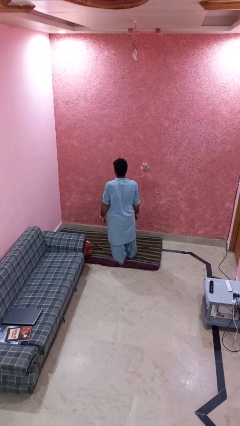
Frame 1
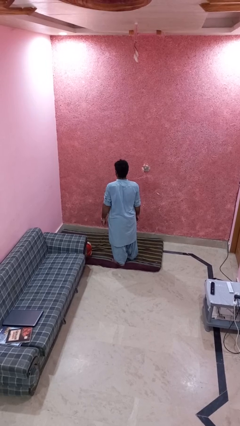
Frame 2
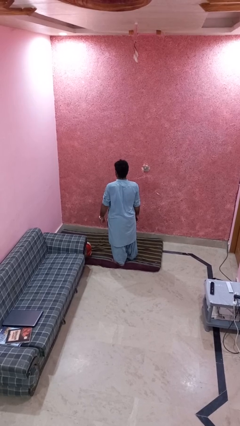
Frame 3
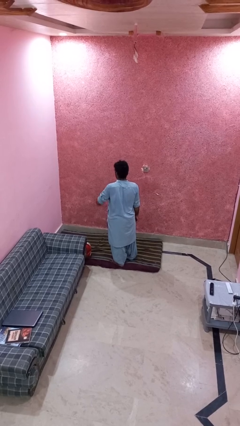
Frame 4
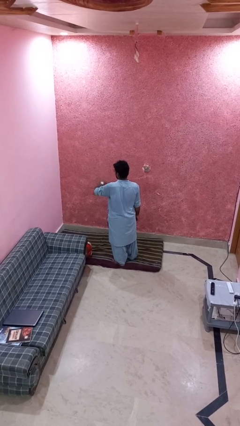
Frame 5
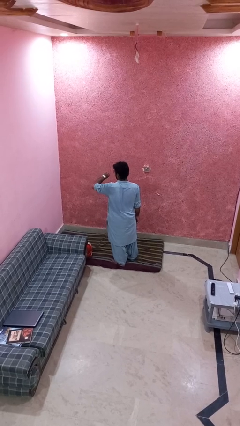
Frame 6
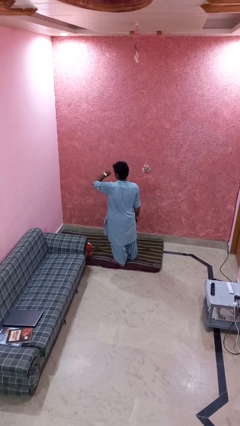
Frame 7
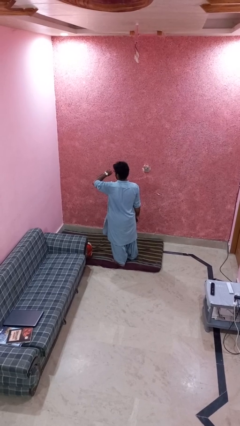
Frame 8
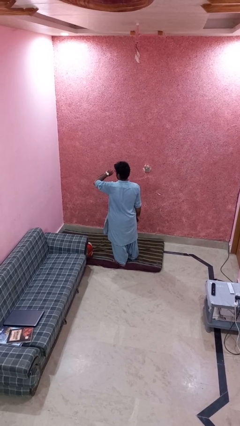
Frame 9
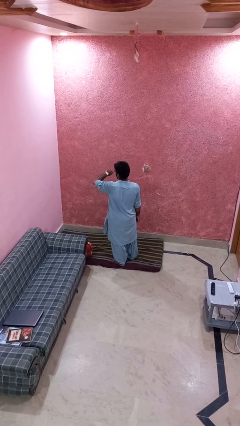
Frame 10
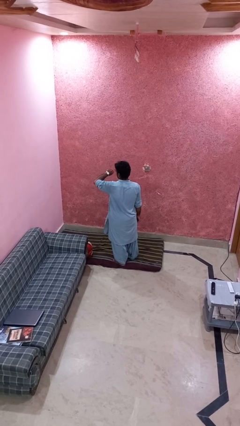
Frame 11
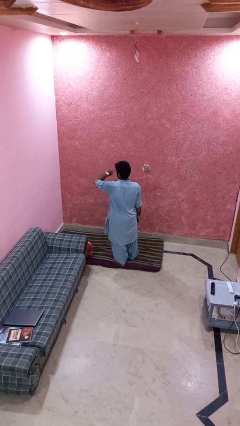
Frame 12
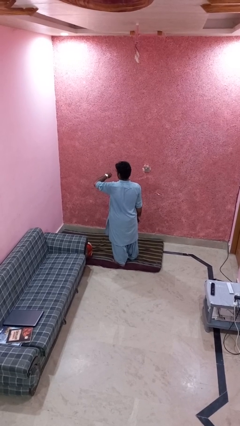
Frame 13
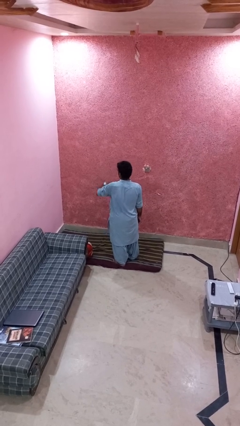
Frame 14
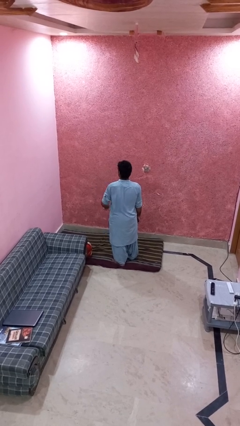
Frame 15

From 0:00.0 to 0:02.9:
person looks at wristwatch

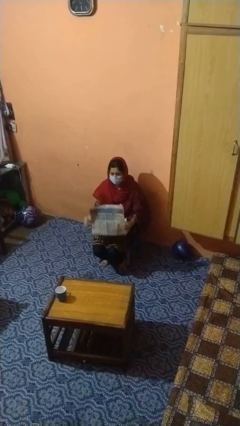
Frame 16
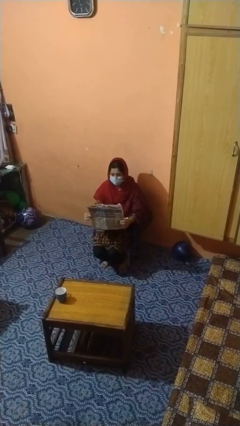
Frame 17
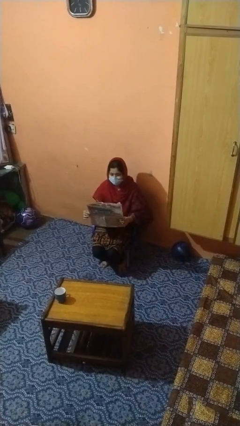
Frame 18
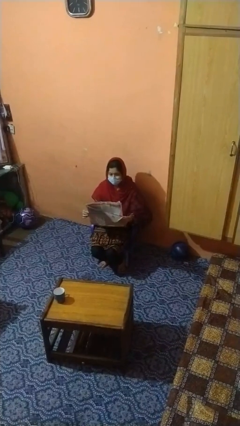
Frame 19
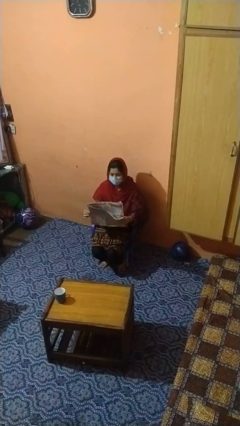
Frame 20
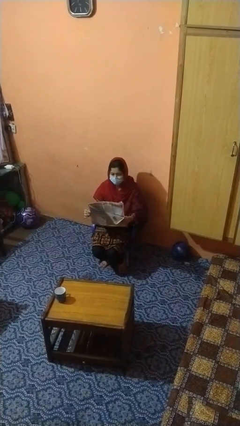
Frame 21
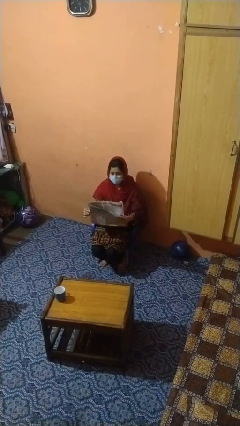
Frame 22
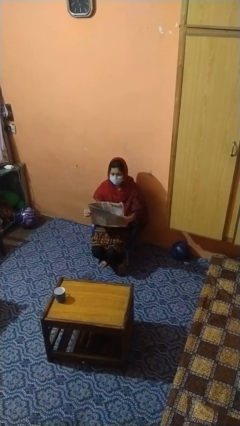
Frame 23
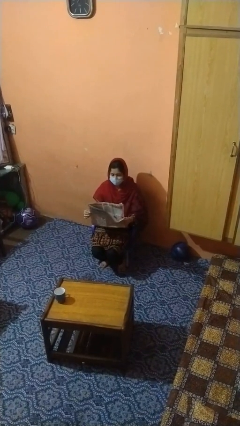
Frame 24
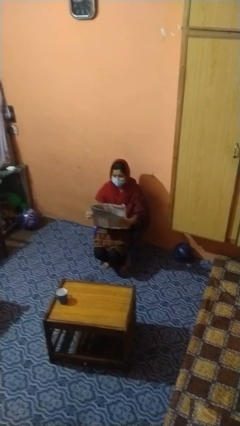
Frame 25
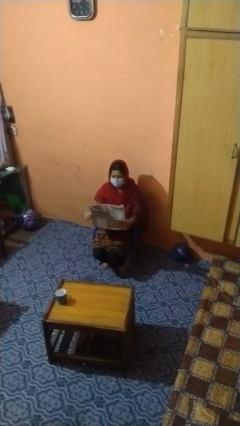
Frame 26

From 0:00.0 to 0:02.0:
person reads newspaper

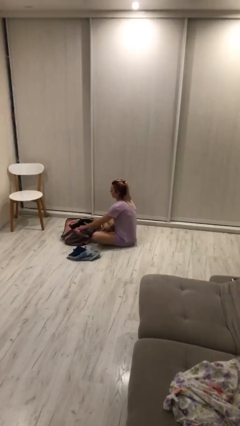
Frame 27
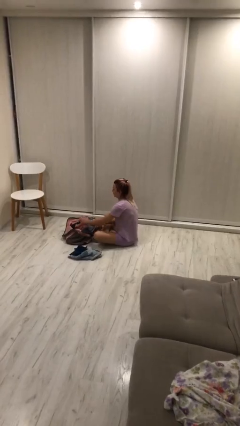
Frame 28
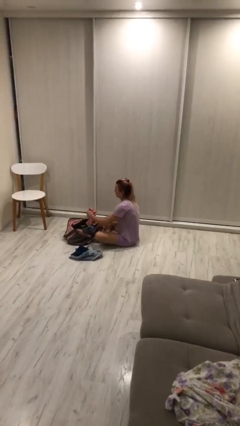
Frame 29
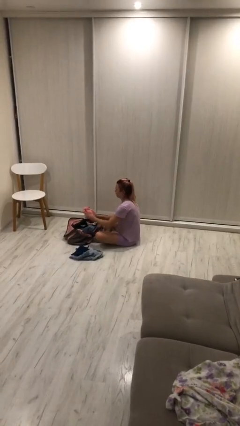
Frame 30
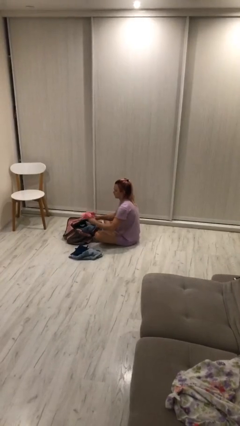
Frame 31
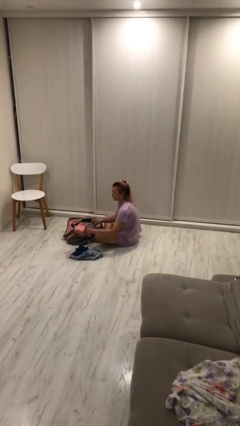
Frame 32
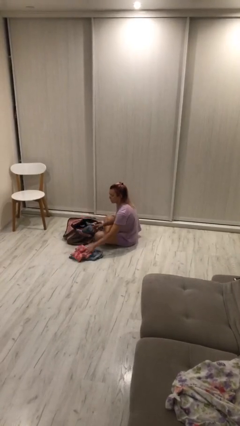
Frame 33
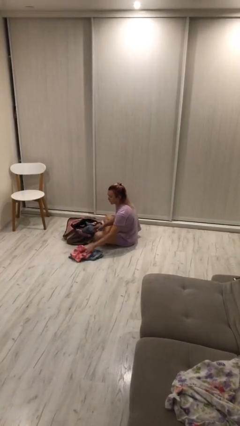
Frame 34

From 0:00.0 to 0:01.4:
person unloads clothes from suitcase

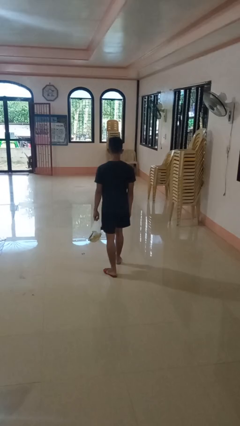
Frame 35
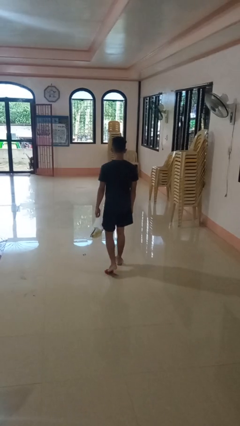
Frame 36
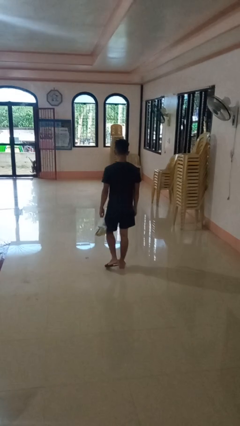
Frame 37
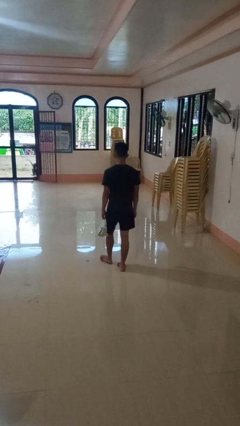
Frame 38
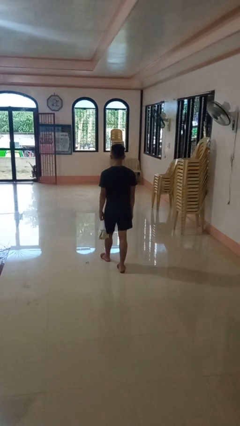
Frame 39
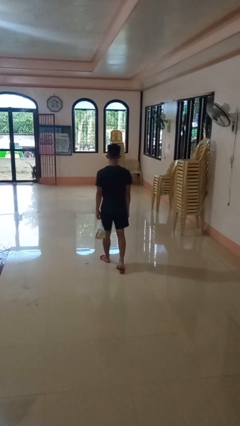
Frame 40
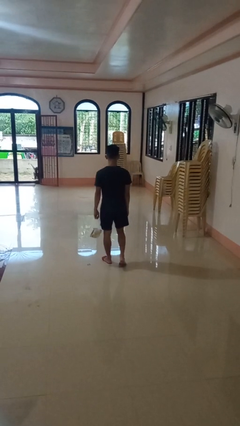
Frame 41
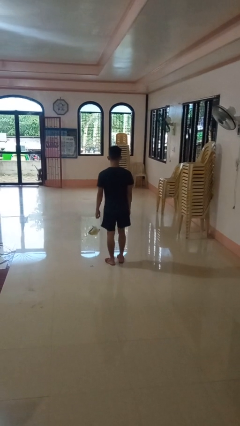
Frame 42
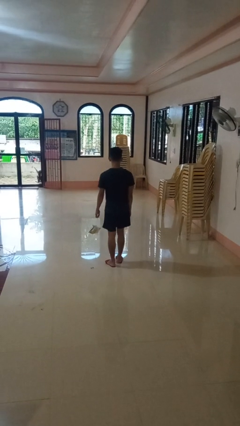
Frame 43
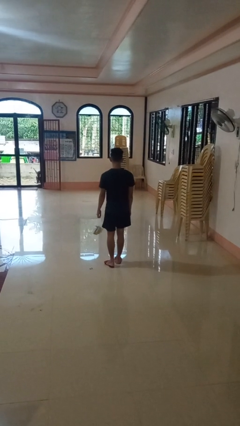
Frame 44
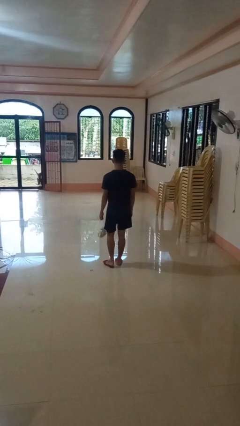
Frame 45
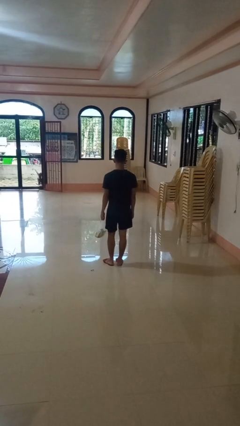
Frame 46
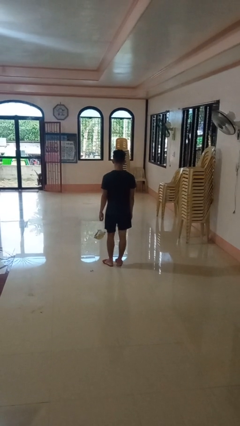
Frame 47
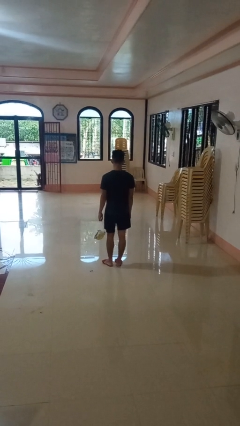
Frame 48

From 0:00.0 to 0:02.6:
person carries groceries

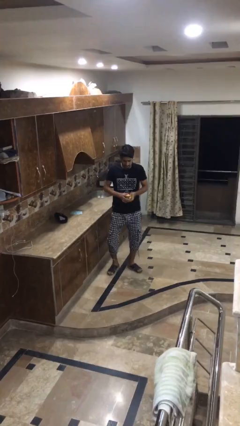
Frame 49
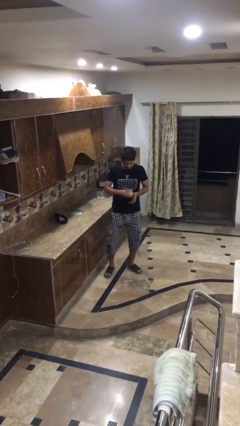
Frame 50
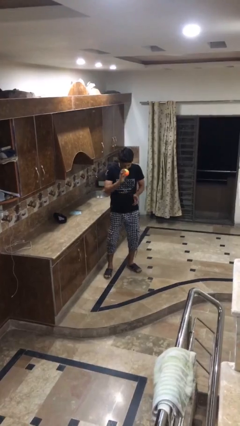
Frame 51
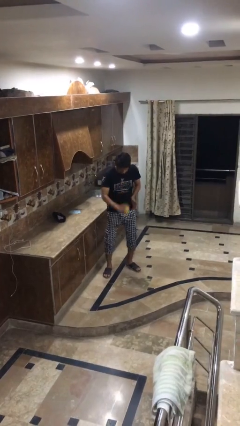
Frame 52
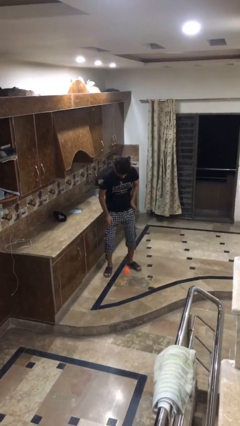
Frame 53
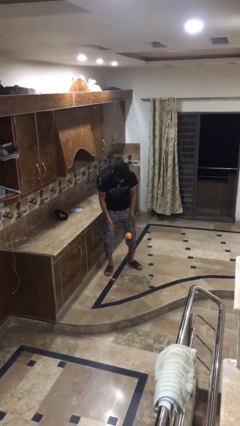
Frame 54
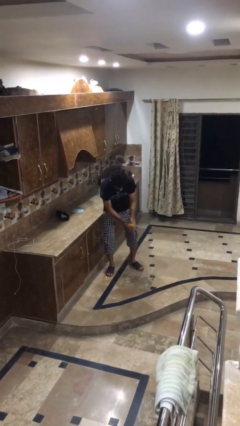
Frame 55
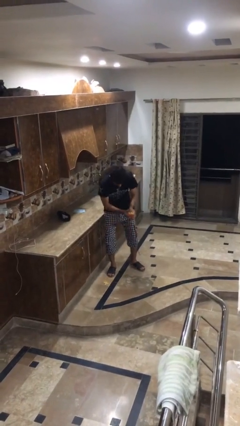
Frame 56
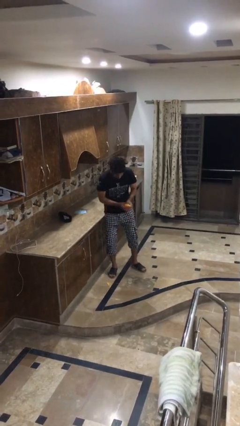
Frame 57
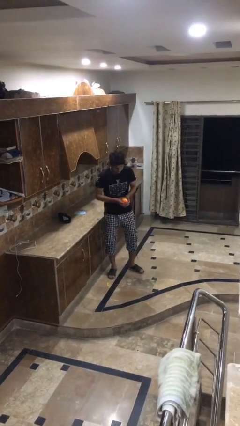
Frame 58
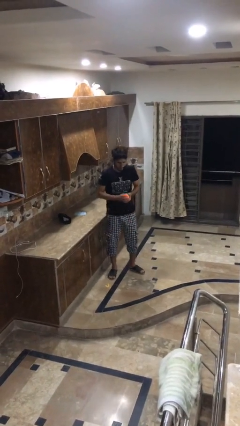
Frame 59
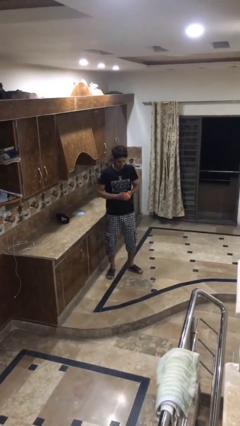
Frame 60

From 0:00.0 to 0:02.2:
person bounces ball on floor

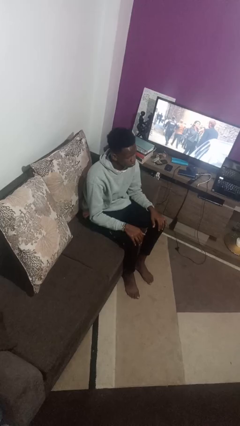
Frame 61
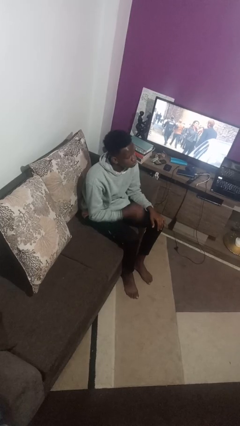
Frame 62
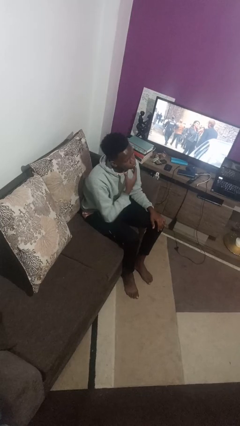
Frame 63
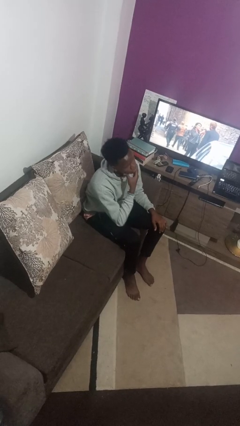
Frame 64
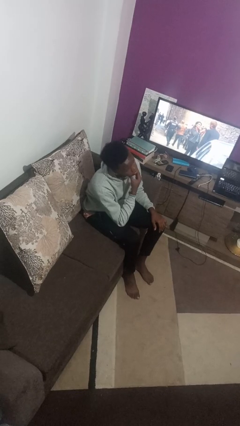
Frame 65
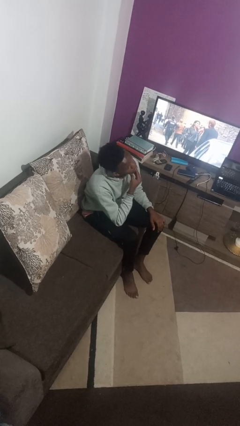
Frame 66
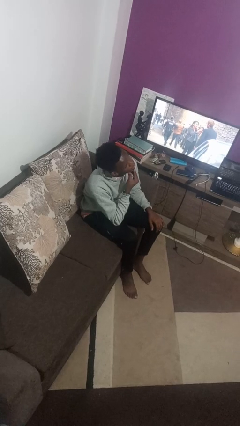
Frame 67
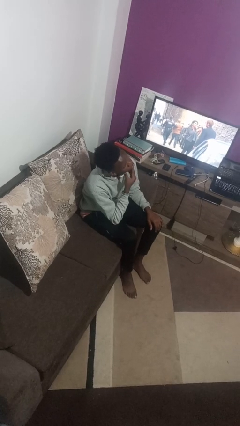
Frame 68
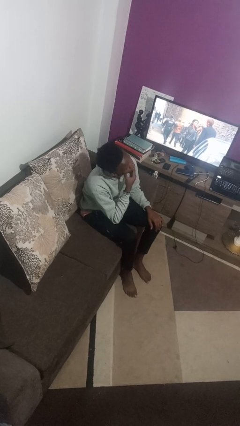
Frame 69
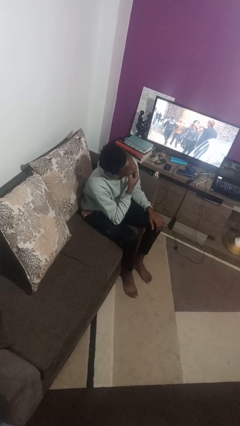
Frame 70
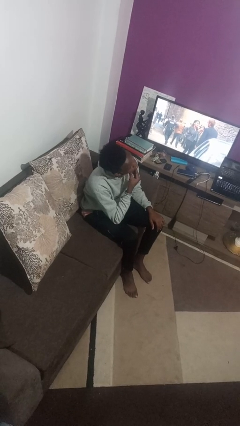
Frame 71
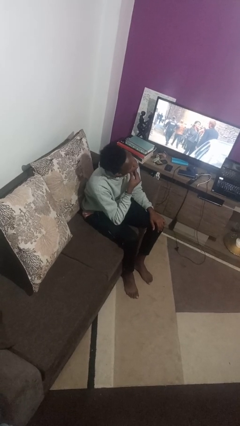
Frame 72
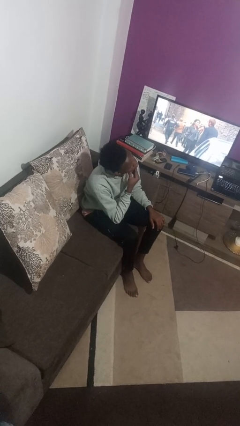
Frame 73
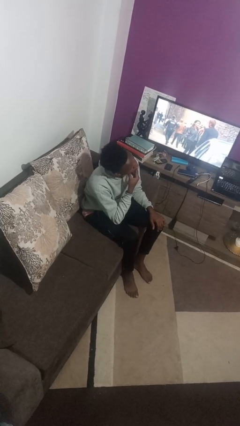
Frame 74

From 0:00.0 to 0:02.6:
person strokes chin

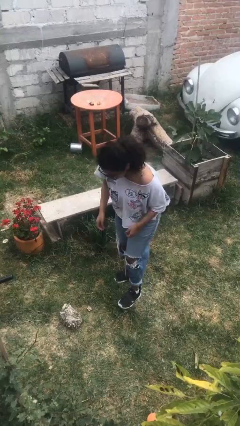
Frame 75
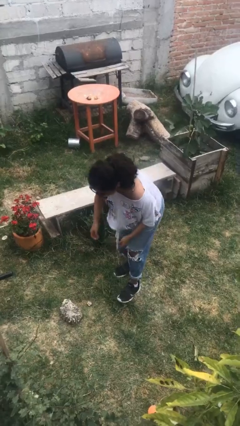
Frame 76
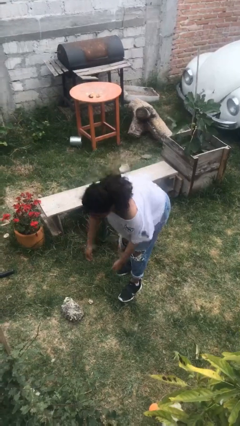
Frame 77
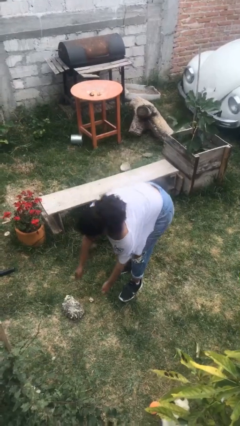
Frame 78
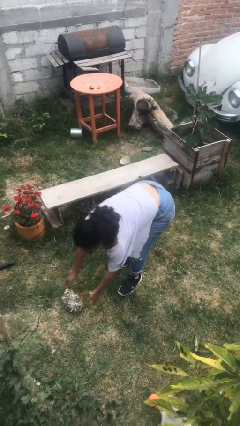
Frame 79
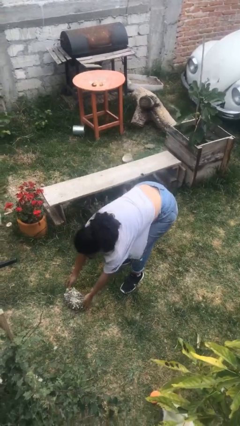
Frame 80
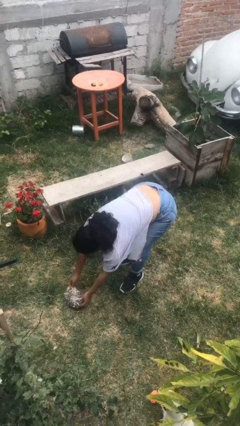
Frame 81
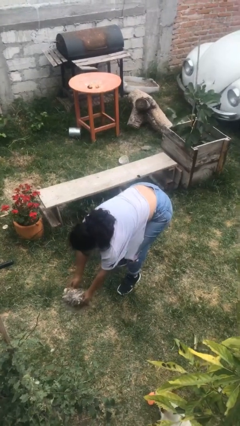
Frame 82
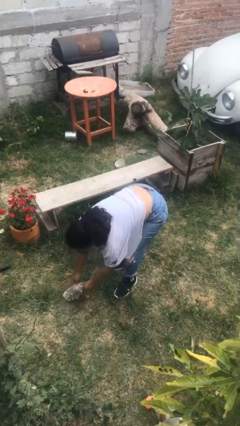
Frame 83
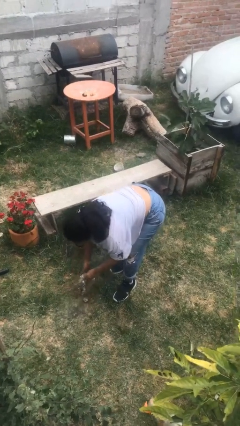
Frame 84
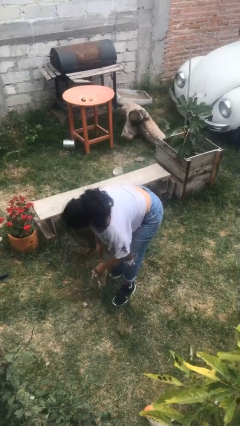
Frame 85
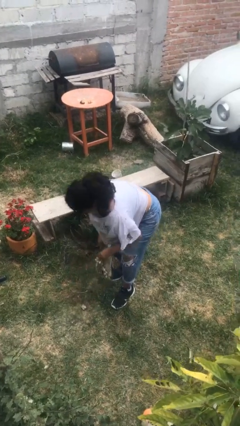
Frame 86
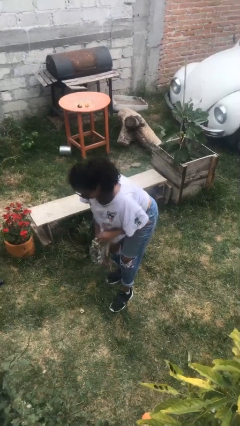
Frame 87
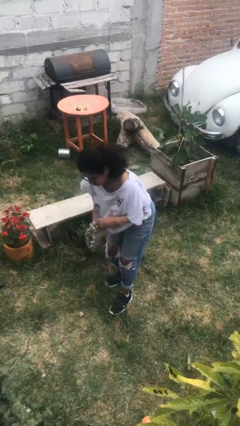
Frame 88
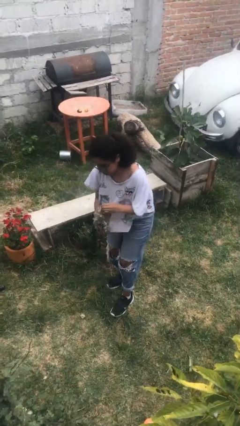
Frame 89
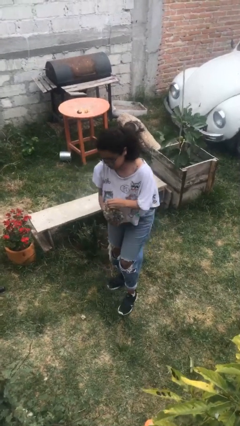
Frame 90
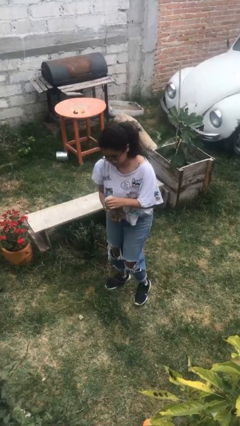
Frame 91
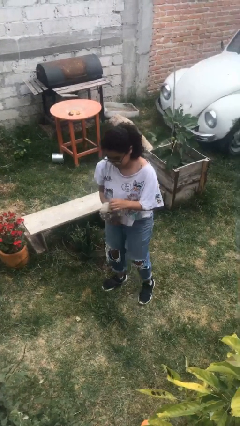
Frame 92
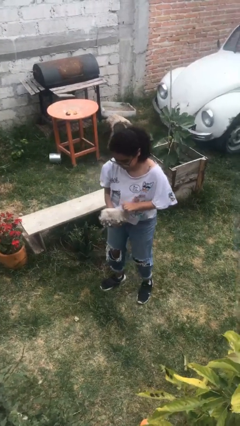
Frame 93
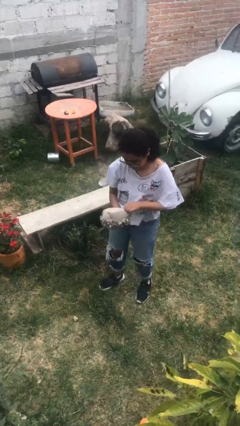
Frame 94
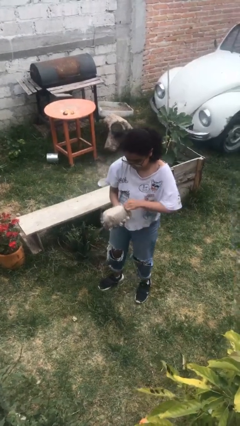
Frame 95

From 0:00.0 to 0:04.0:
person picks up object from floor
